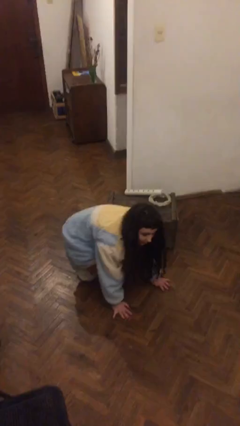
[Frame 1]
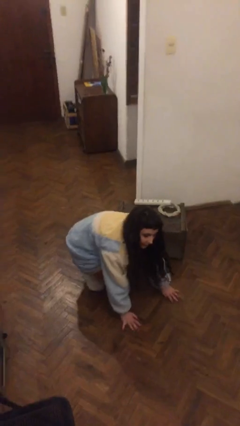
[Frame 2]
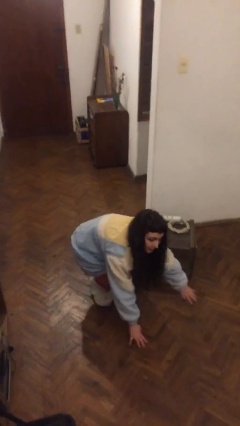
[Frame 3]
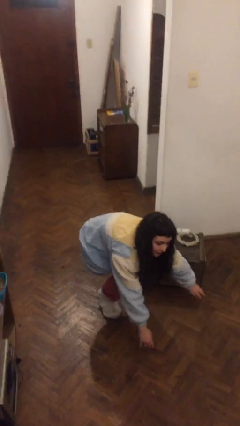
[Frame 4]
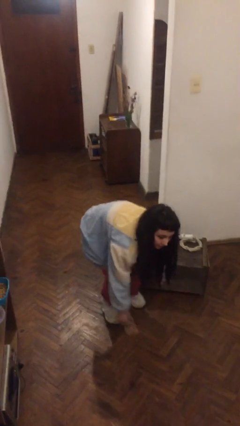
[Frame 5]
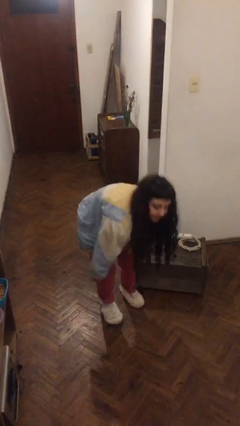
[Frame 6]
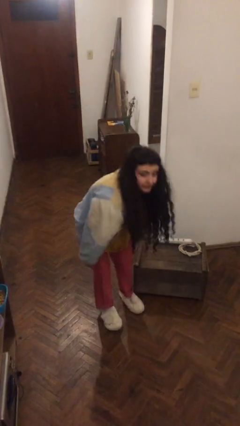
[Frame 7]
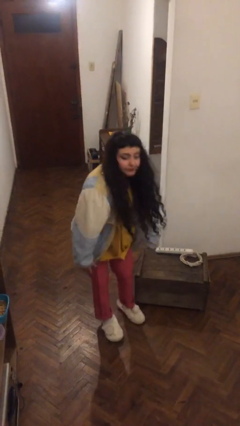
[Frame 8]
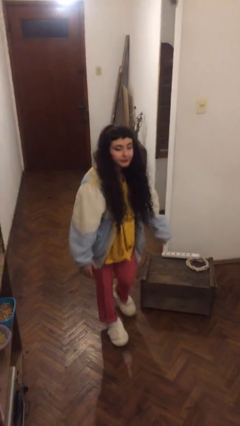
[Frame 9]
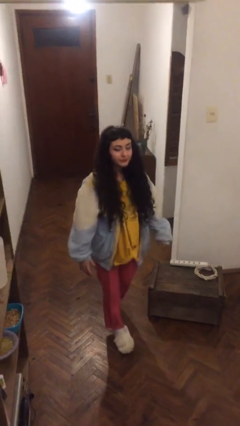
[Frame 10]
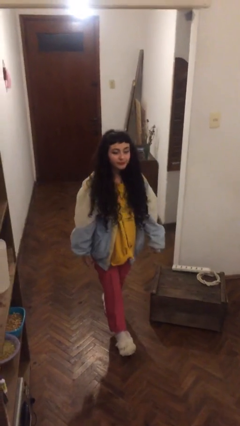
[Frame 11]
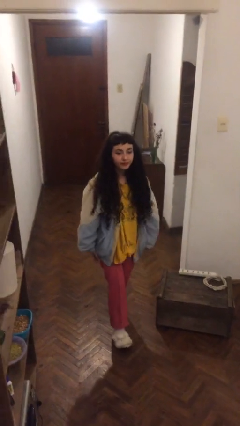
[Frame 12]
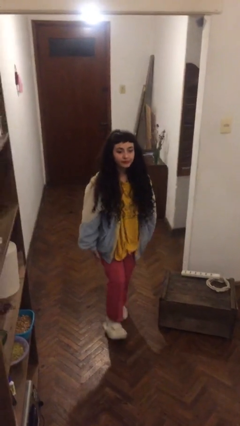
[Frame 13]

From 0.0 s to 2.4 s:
person stands up from floor

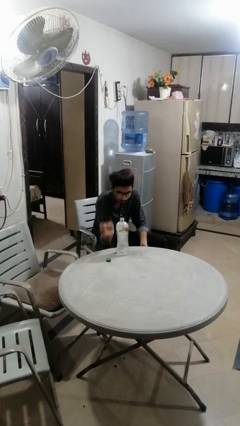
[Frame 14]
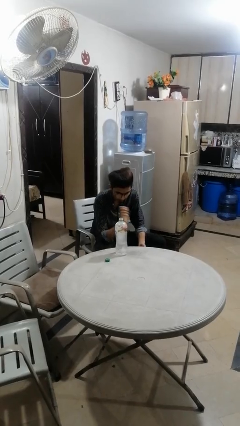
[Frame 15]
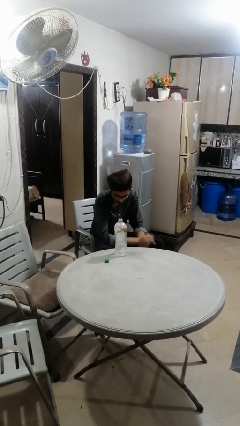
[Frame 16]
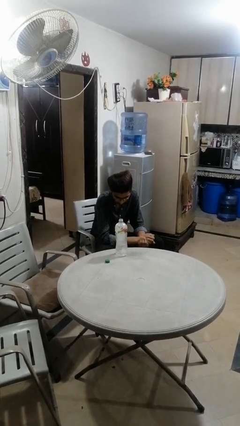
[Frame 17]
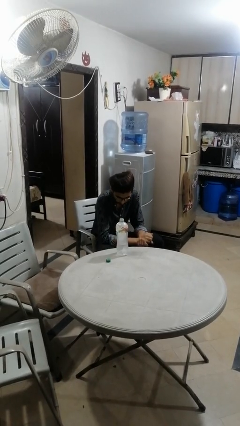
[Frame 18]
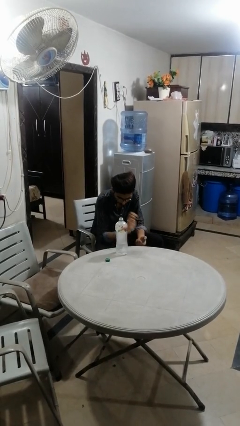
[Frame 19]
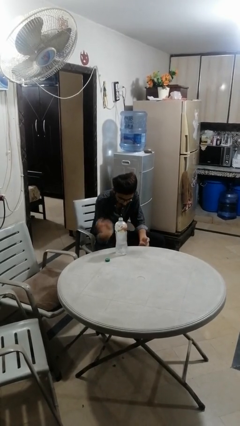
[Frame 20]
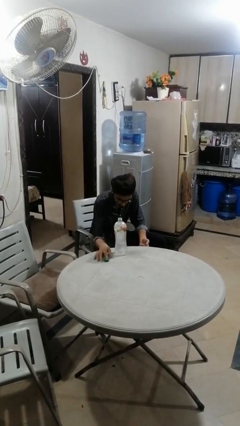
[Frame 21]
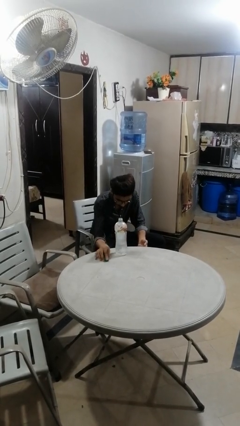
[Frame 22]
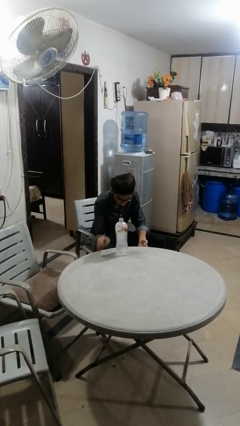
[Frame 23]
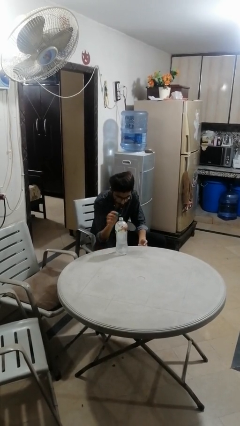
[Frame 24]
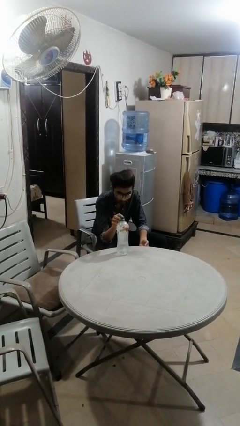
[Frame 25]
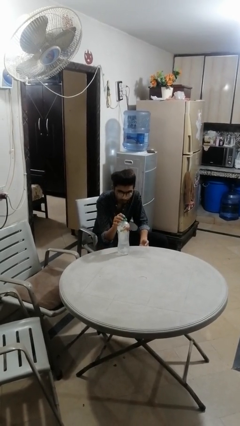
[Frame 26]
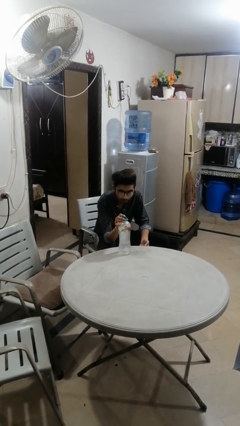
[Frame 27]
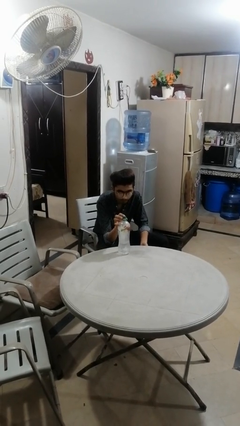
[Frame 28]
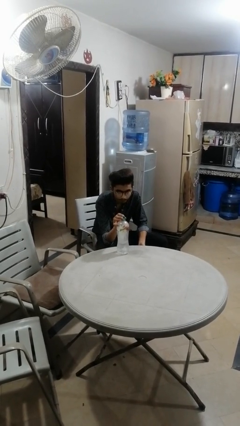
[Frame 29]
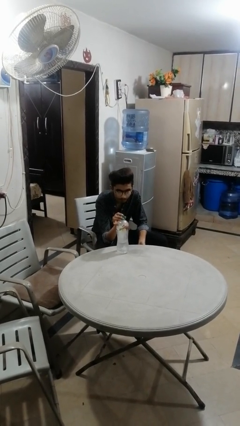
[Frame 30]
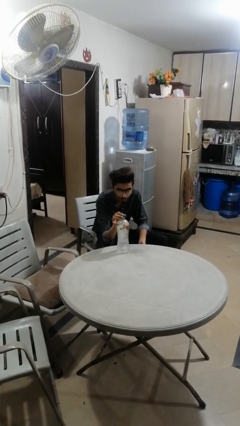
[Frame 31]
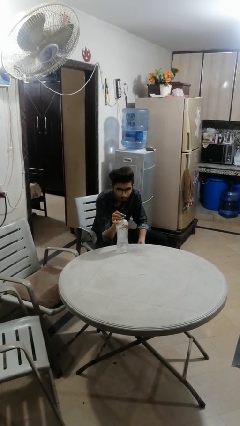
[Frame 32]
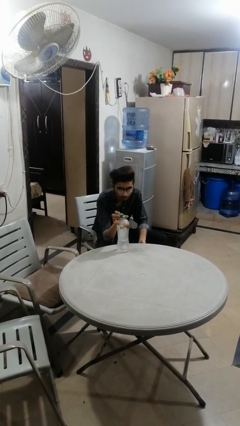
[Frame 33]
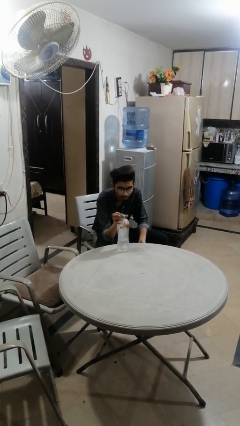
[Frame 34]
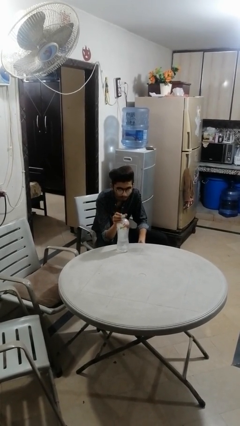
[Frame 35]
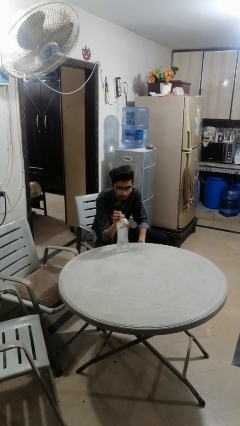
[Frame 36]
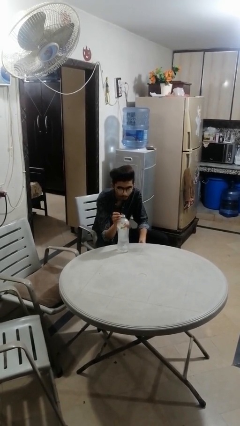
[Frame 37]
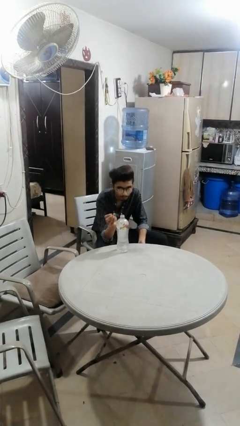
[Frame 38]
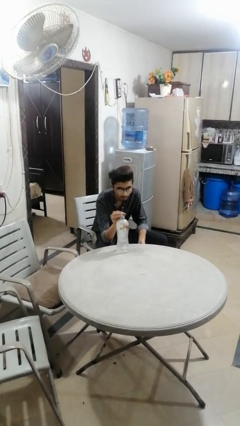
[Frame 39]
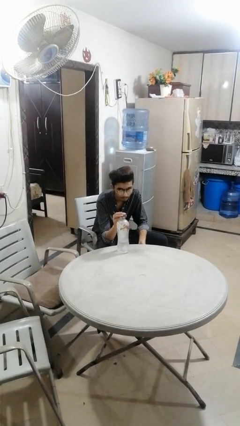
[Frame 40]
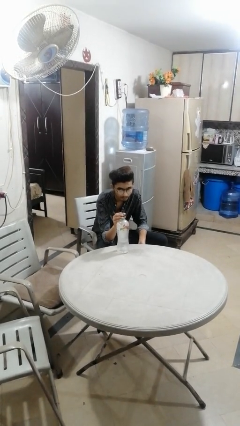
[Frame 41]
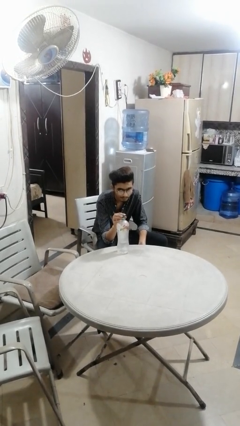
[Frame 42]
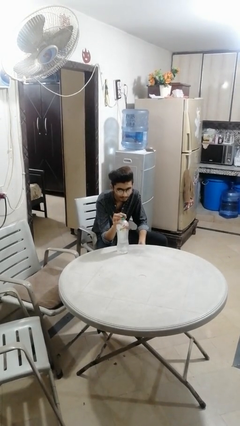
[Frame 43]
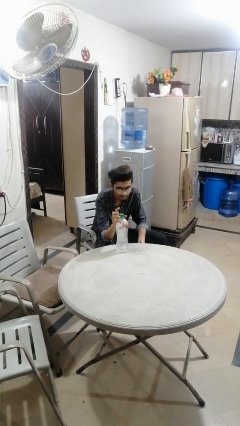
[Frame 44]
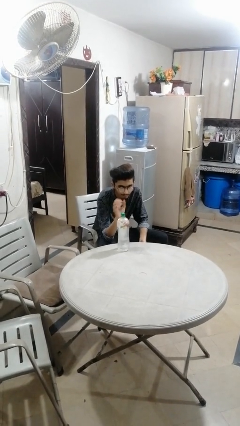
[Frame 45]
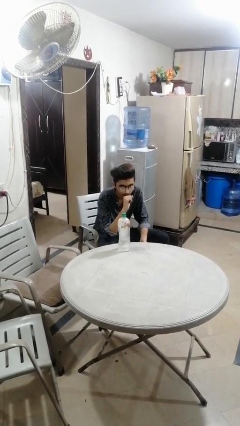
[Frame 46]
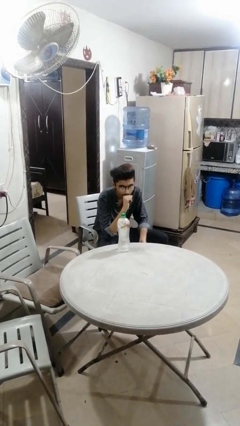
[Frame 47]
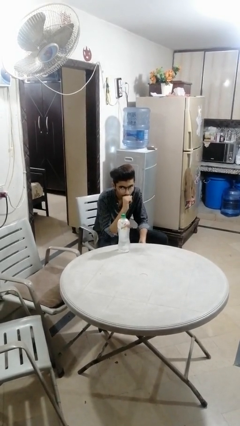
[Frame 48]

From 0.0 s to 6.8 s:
person screws lid to bottle

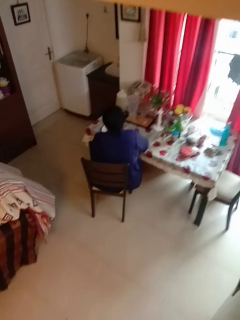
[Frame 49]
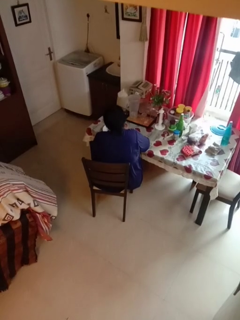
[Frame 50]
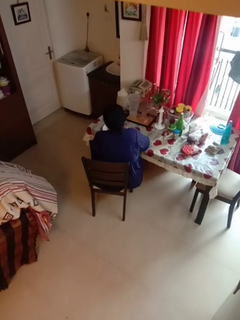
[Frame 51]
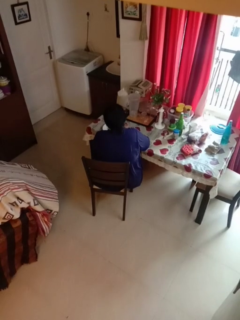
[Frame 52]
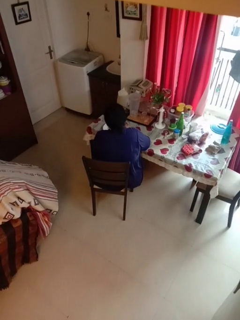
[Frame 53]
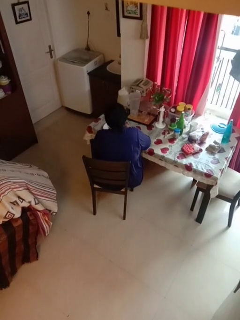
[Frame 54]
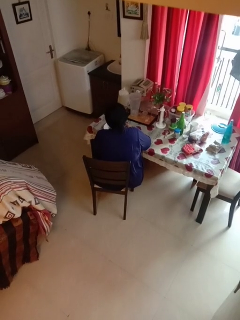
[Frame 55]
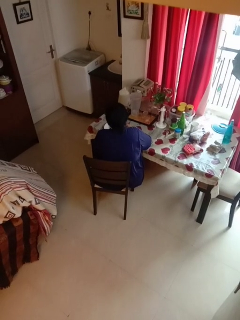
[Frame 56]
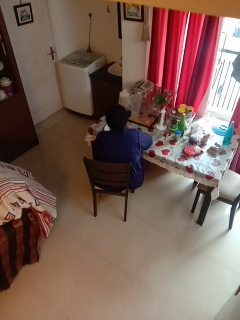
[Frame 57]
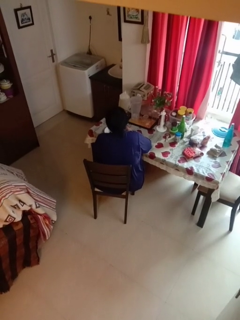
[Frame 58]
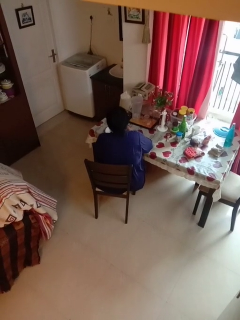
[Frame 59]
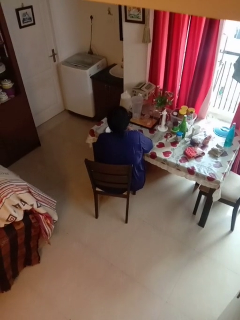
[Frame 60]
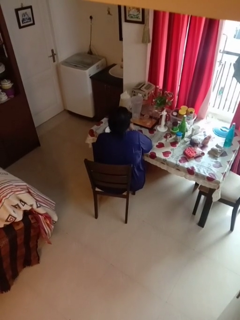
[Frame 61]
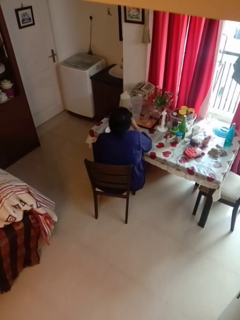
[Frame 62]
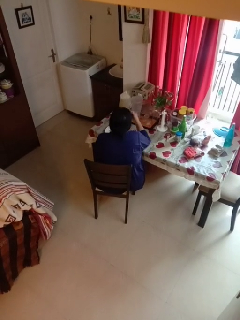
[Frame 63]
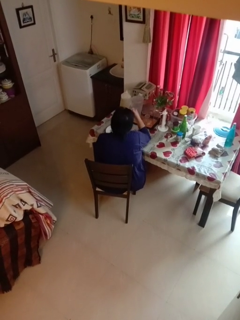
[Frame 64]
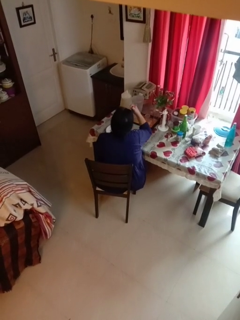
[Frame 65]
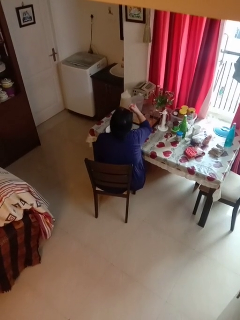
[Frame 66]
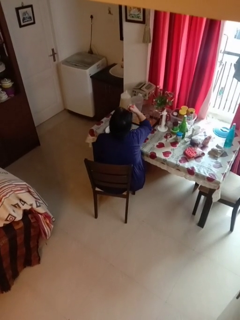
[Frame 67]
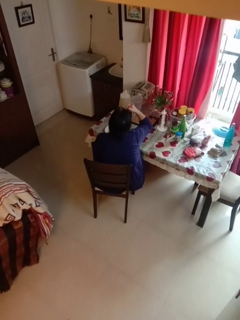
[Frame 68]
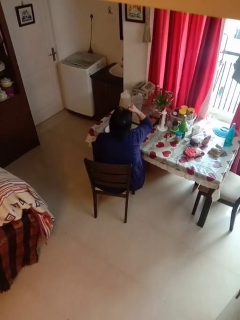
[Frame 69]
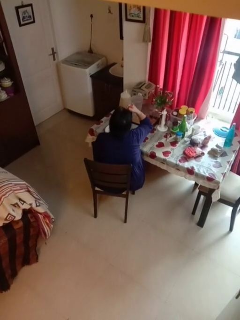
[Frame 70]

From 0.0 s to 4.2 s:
person eats with utensil

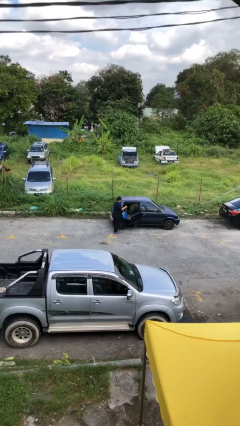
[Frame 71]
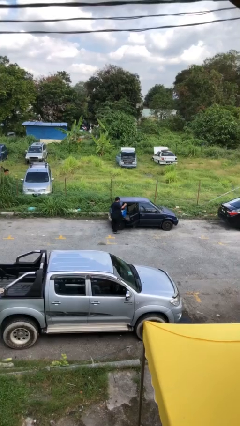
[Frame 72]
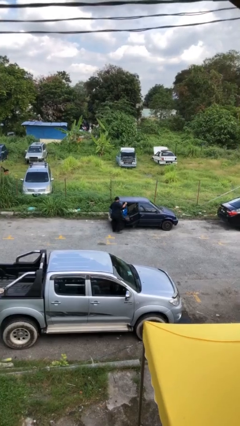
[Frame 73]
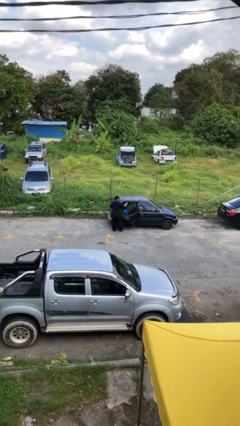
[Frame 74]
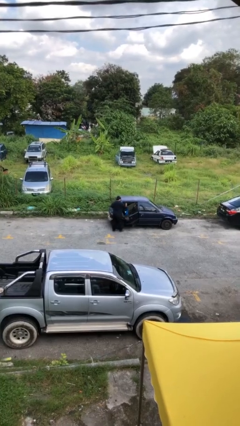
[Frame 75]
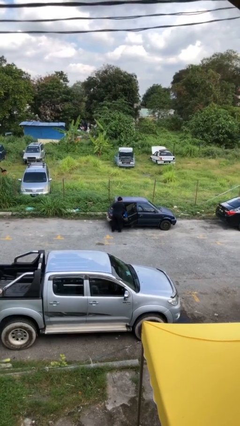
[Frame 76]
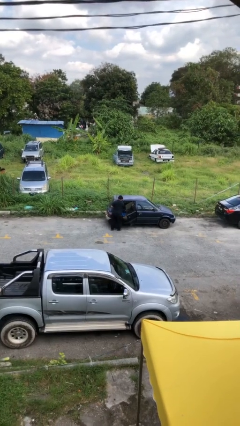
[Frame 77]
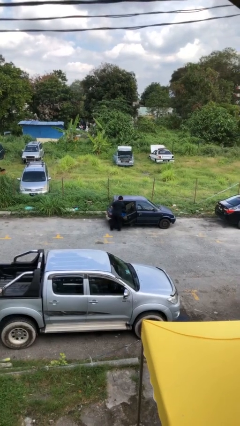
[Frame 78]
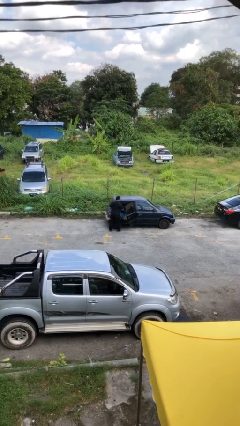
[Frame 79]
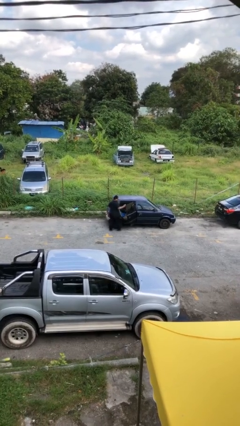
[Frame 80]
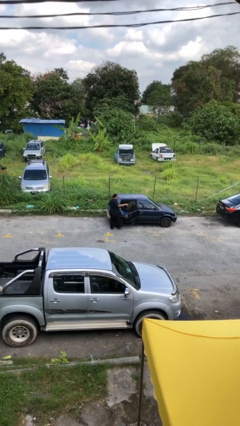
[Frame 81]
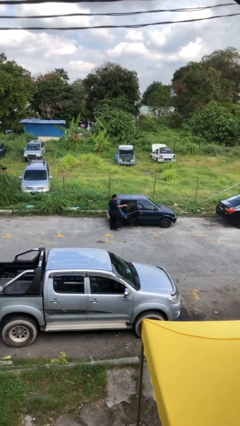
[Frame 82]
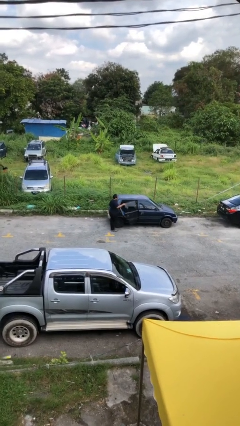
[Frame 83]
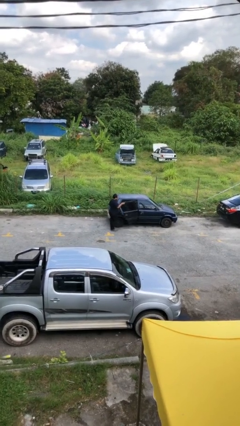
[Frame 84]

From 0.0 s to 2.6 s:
person loads car

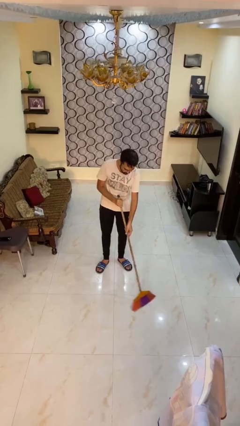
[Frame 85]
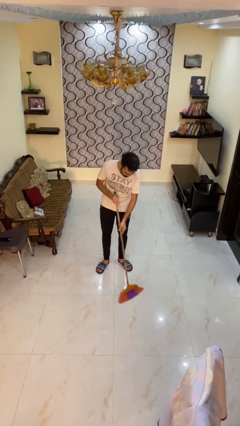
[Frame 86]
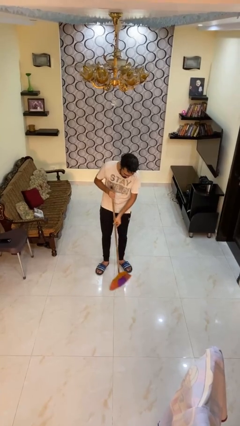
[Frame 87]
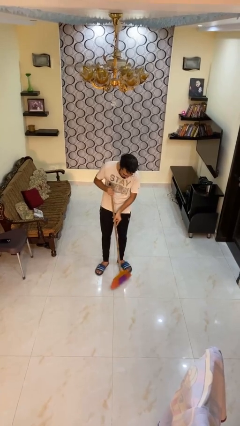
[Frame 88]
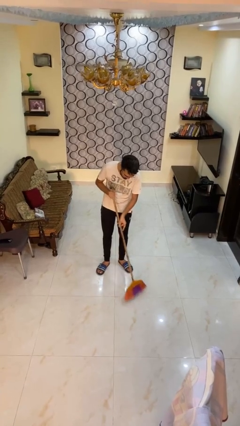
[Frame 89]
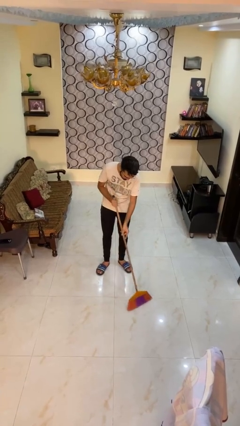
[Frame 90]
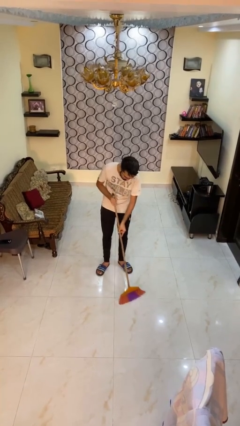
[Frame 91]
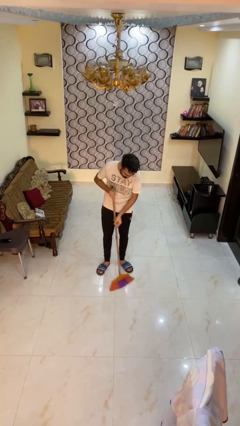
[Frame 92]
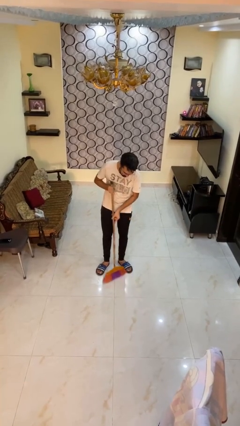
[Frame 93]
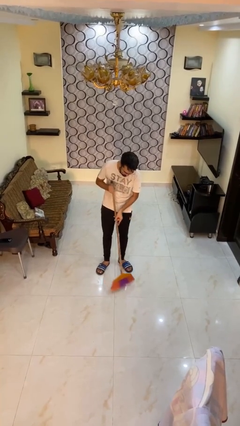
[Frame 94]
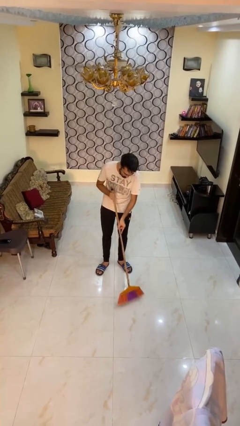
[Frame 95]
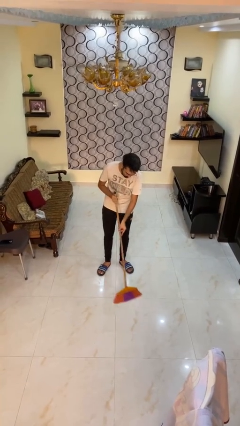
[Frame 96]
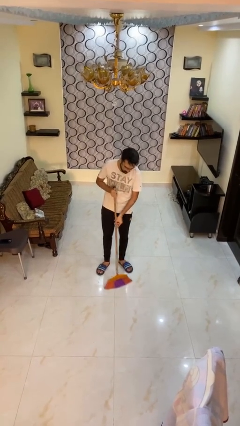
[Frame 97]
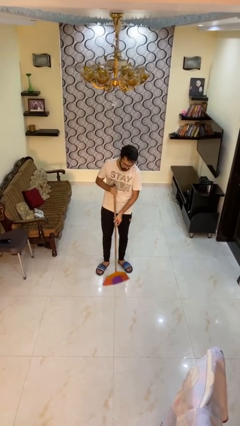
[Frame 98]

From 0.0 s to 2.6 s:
person mops

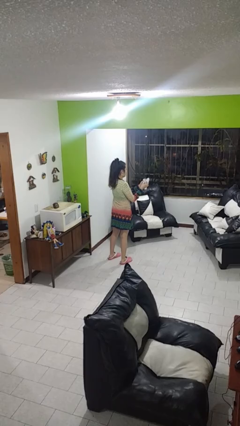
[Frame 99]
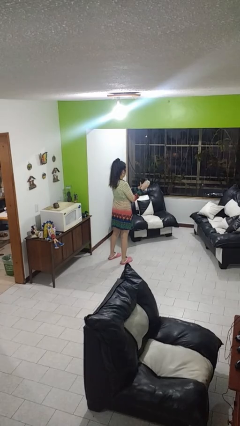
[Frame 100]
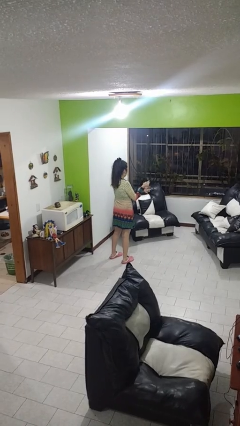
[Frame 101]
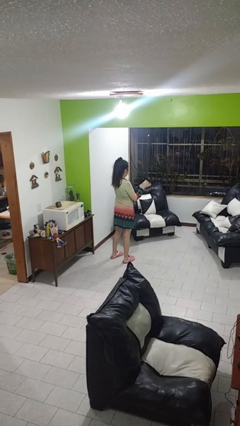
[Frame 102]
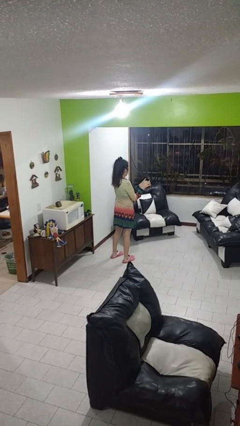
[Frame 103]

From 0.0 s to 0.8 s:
person crumples paper
